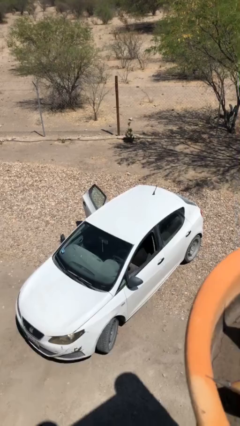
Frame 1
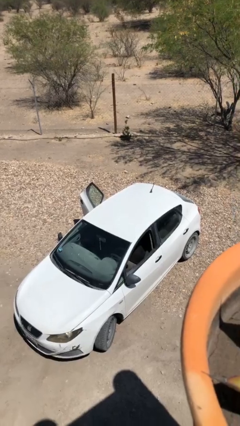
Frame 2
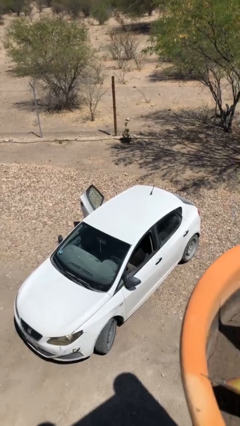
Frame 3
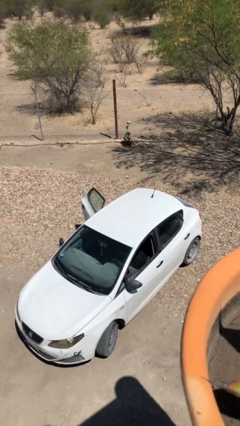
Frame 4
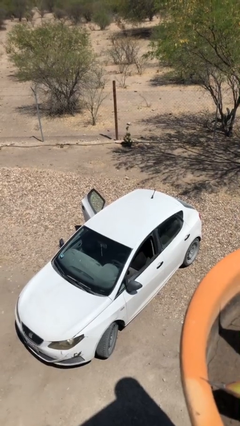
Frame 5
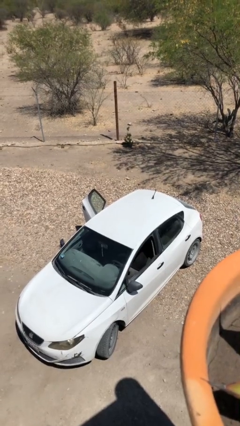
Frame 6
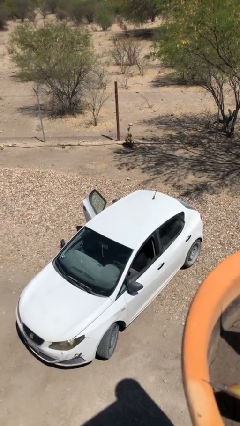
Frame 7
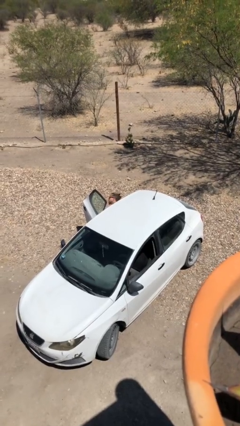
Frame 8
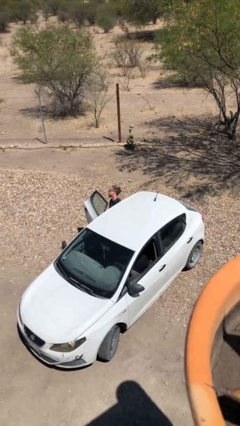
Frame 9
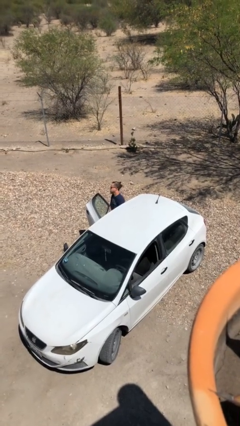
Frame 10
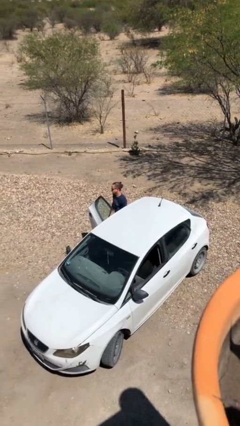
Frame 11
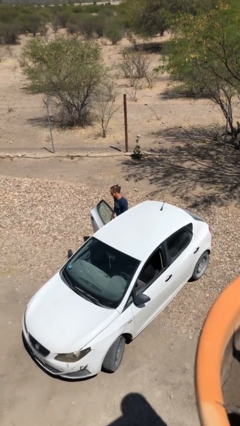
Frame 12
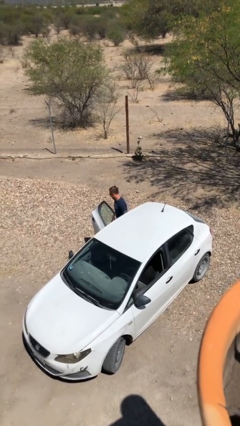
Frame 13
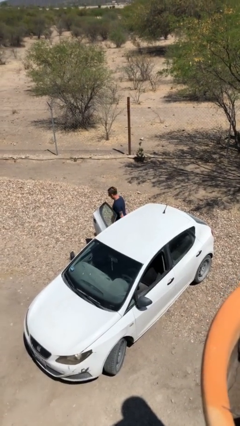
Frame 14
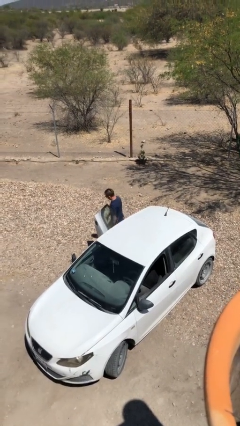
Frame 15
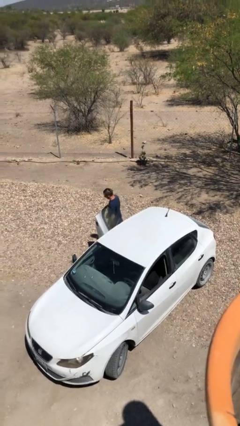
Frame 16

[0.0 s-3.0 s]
person exits car

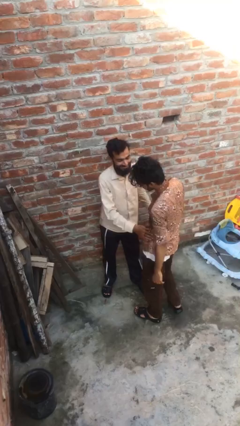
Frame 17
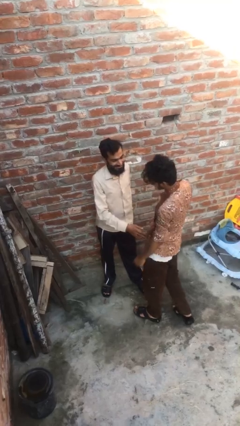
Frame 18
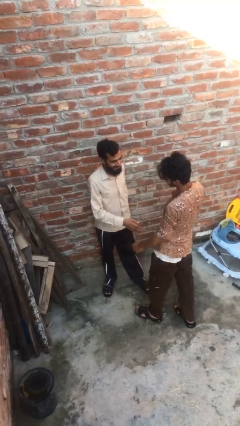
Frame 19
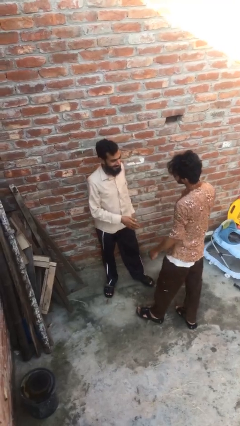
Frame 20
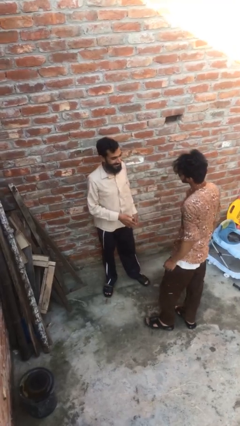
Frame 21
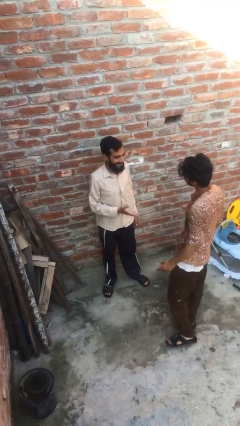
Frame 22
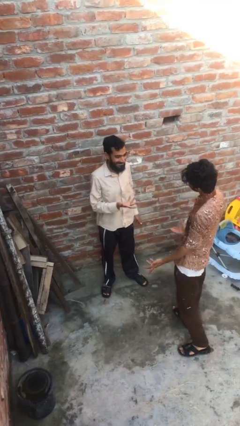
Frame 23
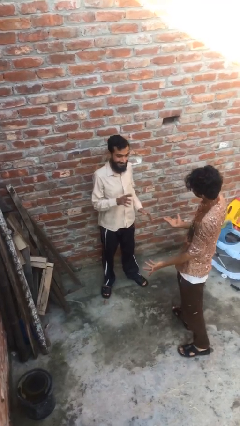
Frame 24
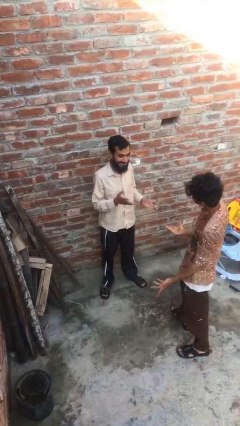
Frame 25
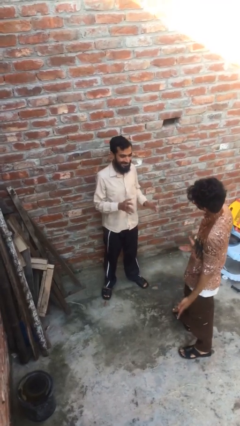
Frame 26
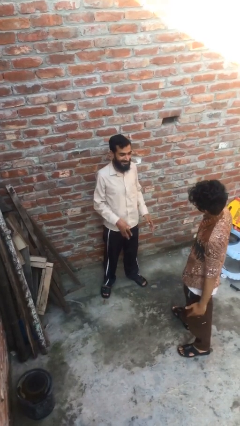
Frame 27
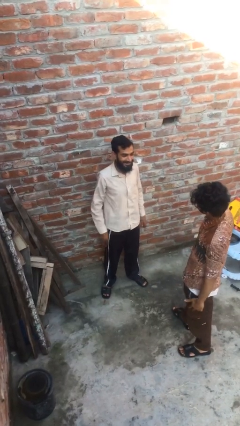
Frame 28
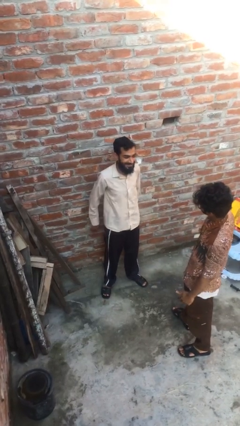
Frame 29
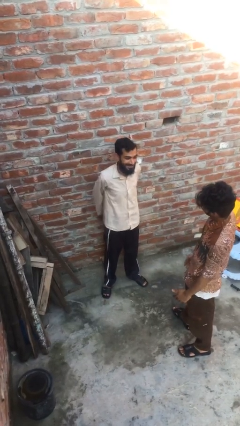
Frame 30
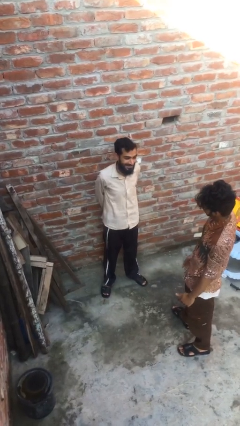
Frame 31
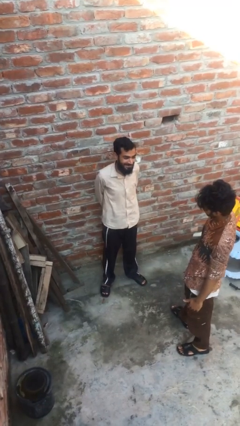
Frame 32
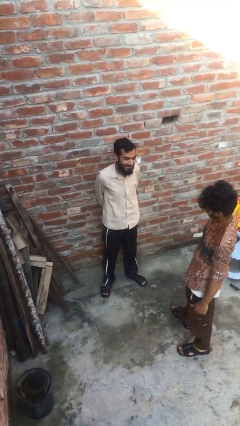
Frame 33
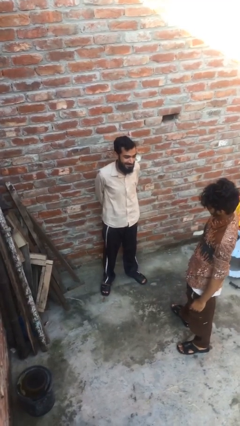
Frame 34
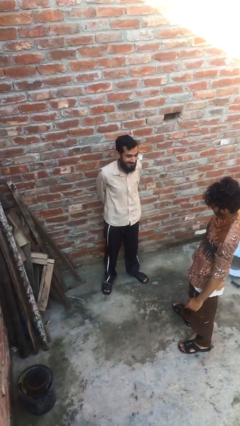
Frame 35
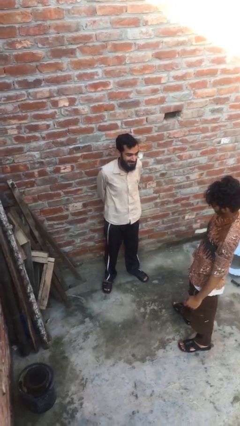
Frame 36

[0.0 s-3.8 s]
person talks to person

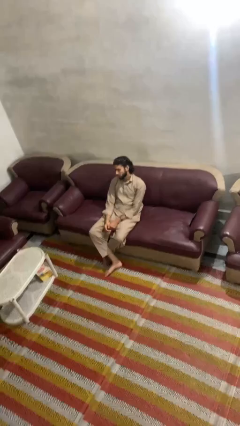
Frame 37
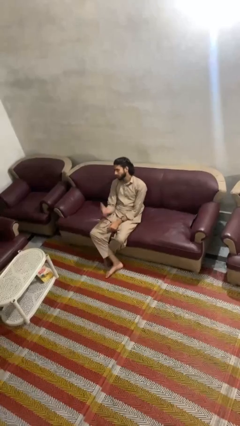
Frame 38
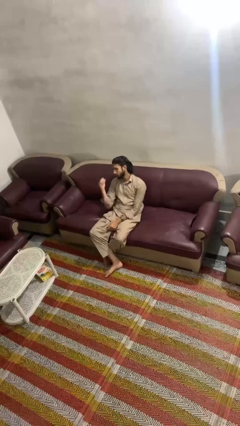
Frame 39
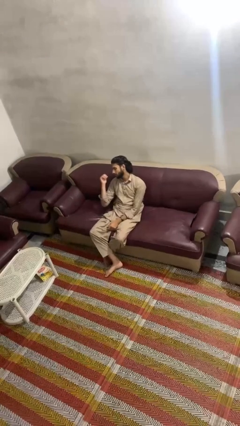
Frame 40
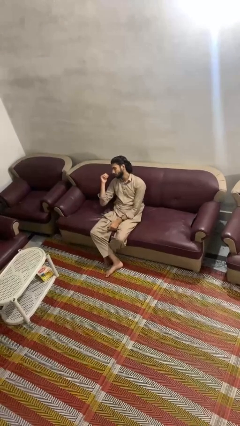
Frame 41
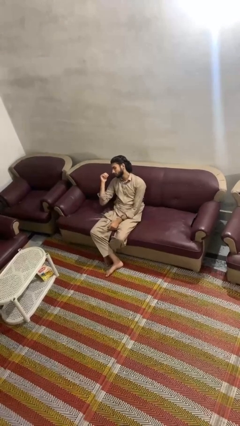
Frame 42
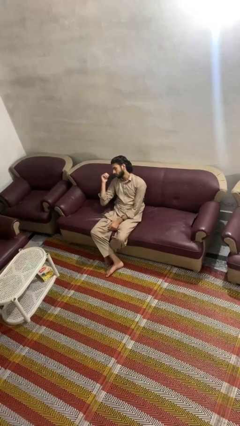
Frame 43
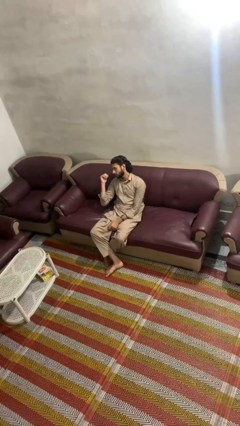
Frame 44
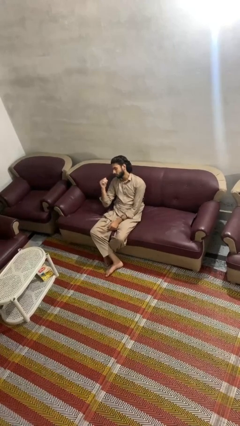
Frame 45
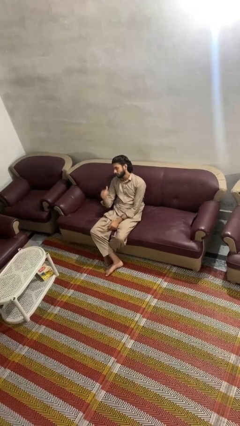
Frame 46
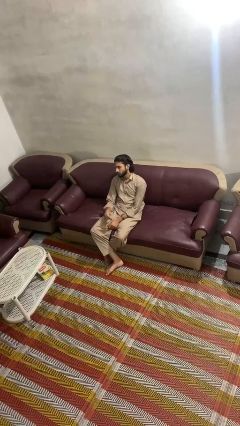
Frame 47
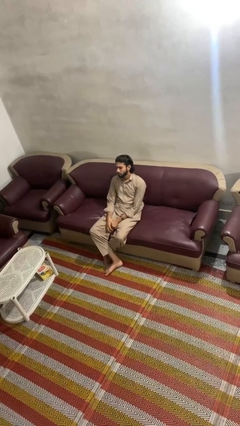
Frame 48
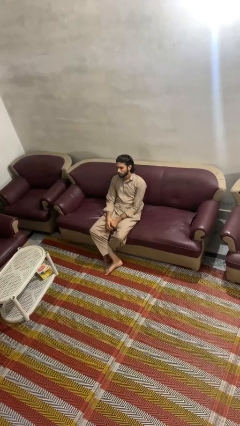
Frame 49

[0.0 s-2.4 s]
person gestures behind me

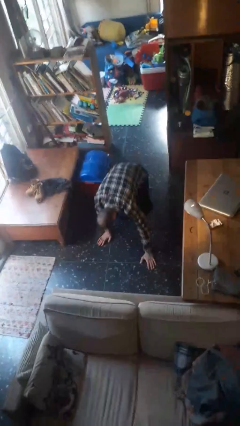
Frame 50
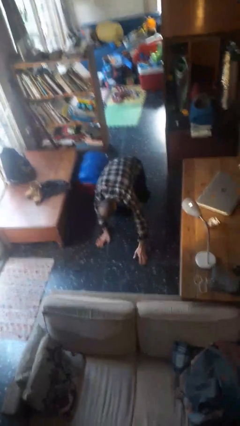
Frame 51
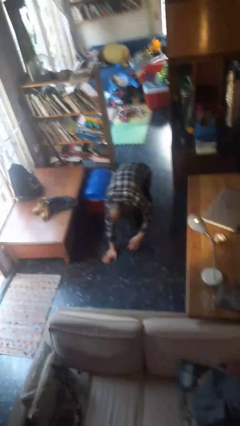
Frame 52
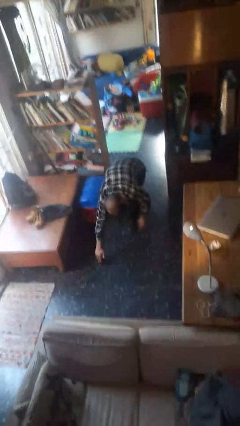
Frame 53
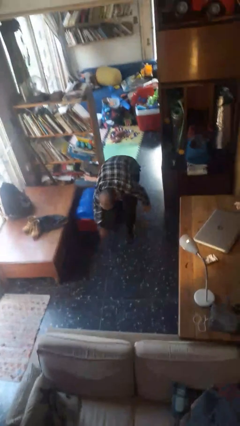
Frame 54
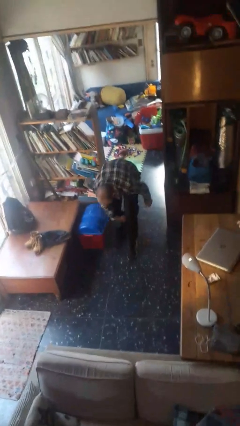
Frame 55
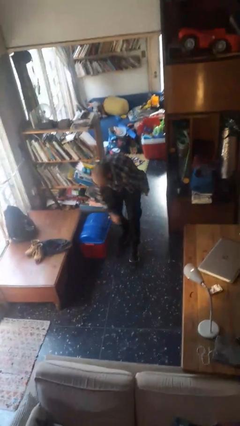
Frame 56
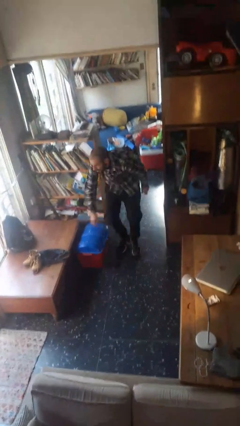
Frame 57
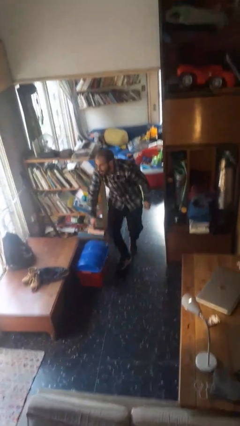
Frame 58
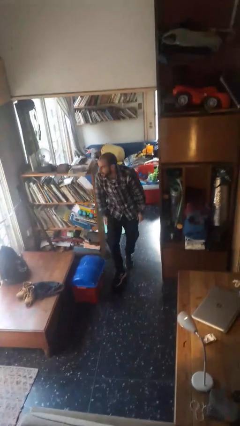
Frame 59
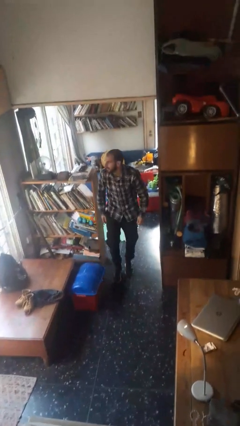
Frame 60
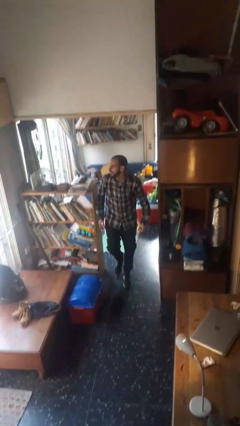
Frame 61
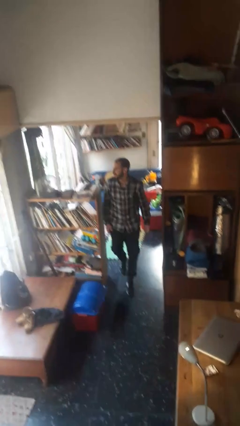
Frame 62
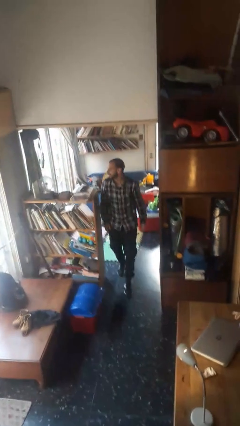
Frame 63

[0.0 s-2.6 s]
person stands up from floor

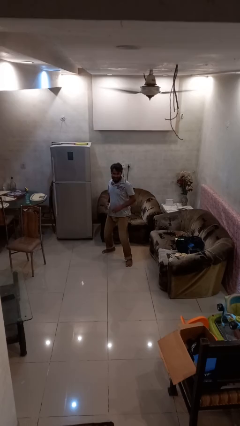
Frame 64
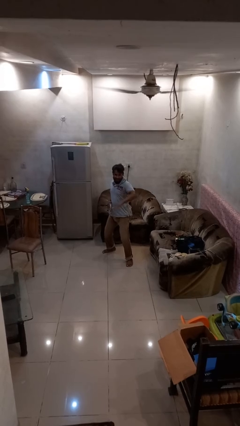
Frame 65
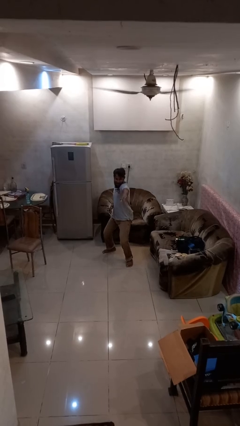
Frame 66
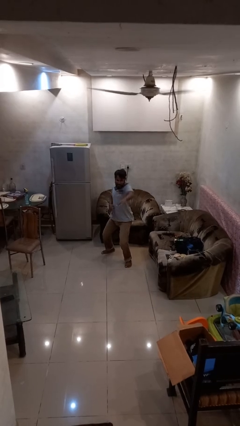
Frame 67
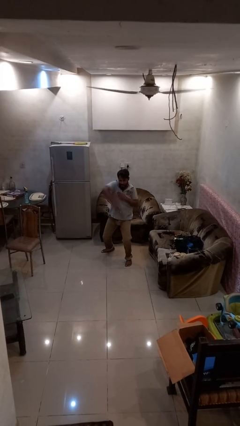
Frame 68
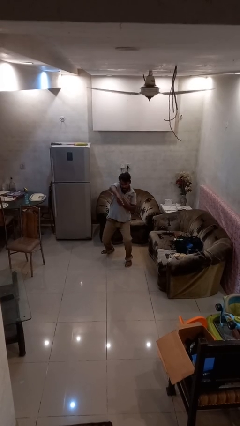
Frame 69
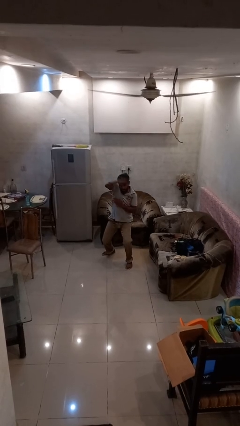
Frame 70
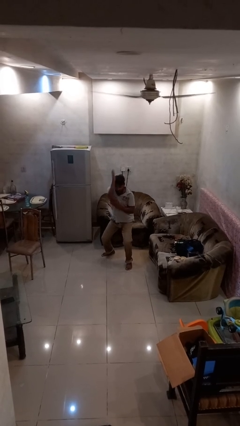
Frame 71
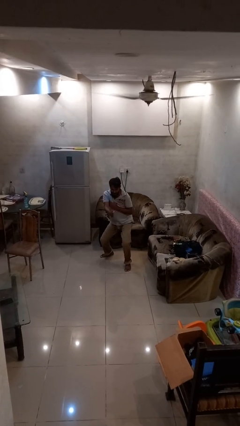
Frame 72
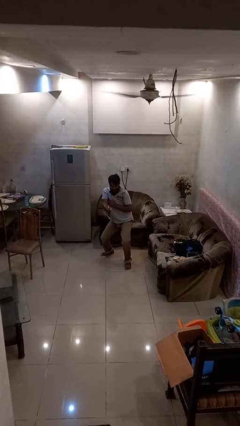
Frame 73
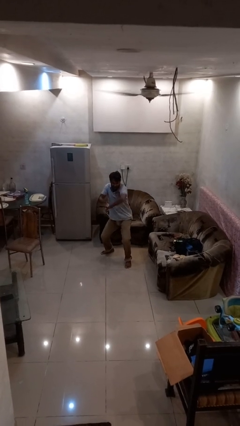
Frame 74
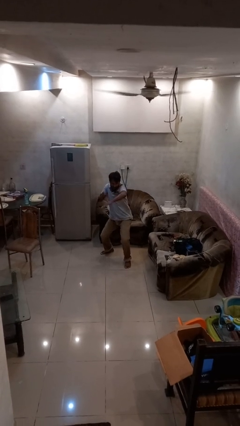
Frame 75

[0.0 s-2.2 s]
person karate chop

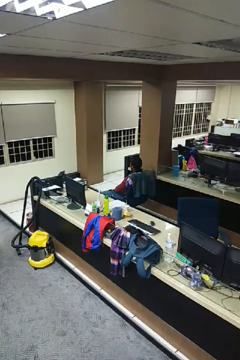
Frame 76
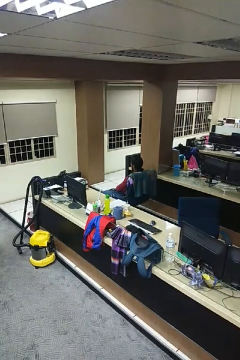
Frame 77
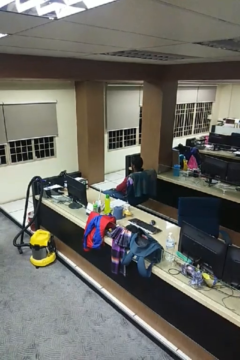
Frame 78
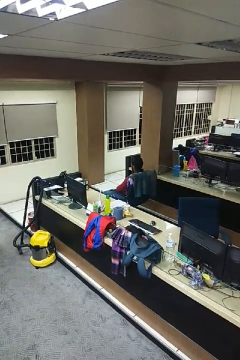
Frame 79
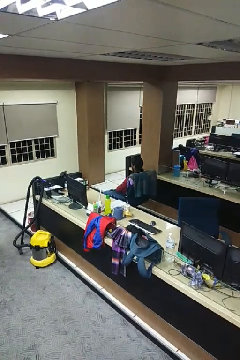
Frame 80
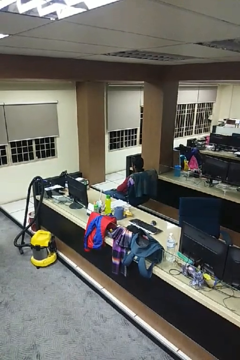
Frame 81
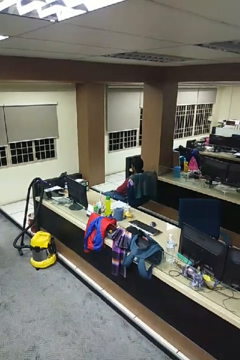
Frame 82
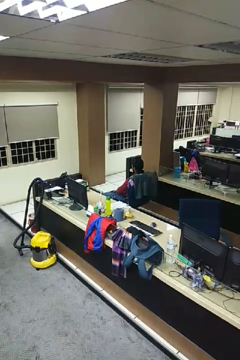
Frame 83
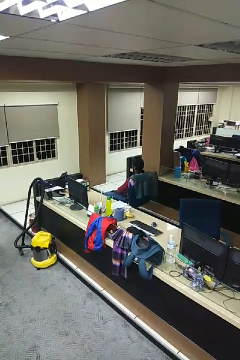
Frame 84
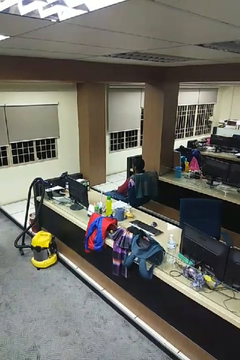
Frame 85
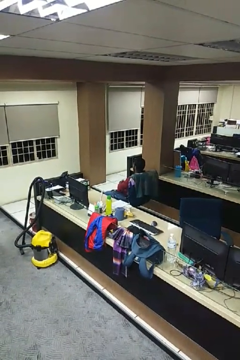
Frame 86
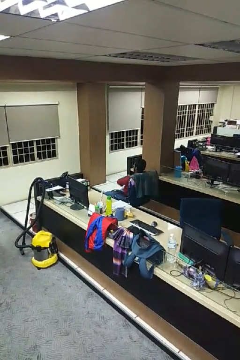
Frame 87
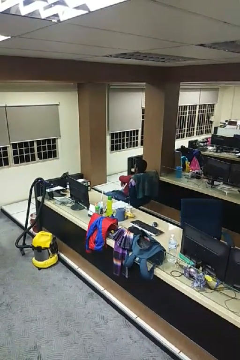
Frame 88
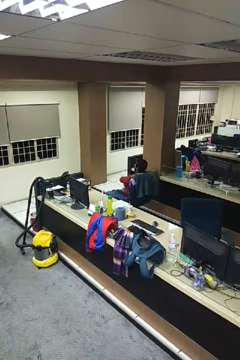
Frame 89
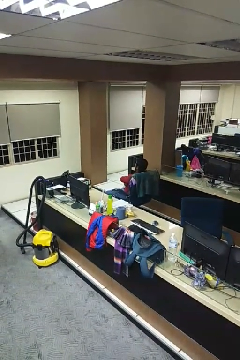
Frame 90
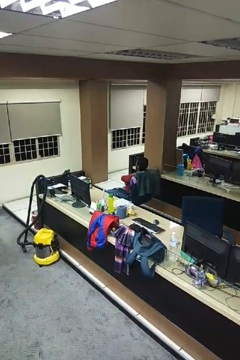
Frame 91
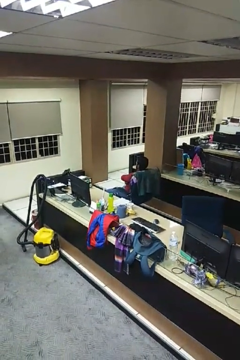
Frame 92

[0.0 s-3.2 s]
person crosses arms

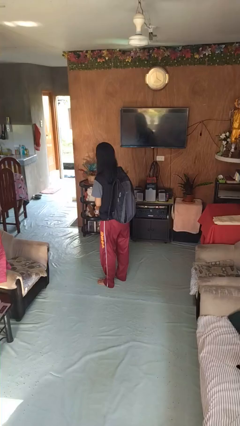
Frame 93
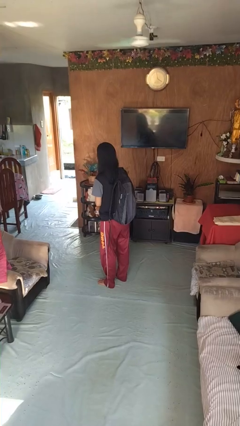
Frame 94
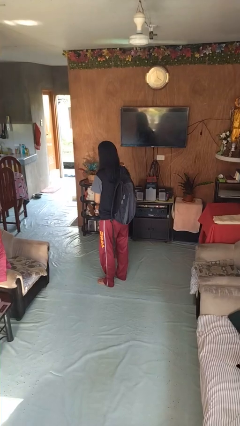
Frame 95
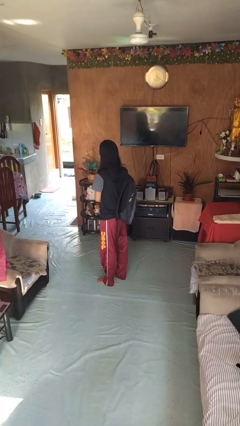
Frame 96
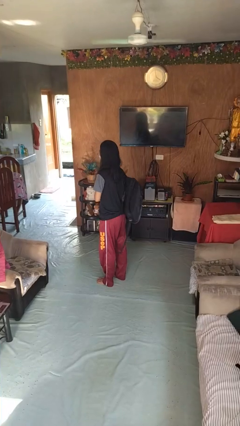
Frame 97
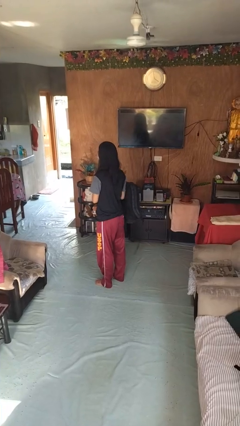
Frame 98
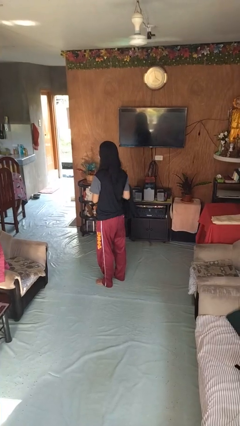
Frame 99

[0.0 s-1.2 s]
person takes off backpack
